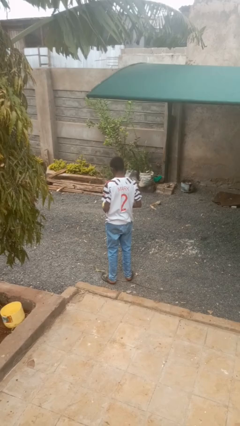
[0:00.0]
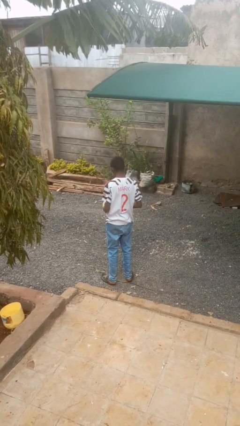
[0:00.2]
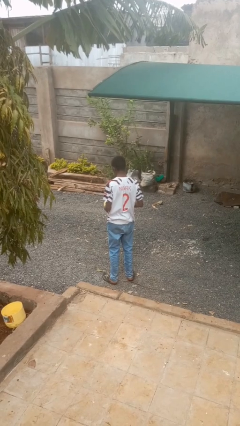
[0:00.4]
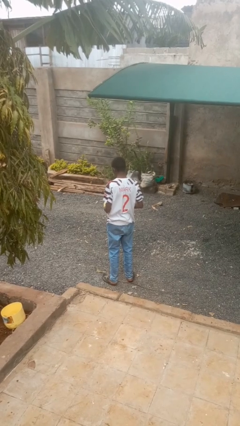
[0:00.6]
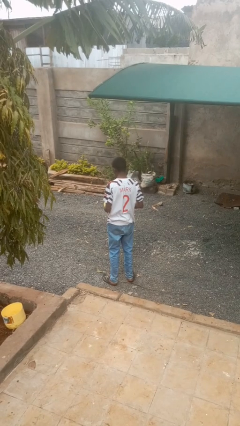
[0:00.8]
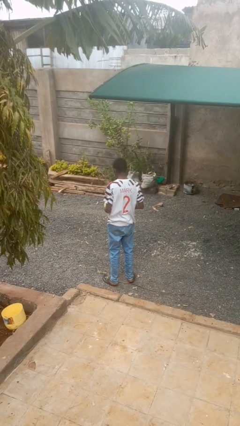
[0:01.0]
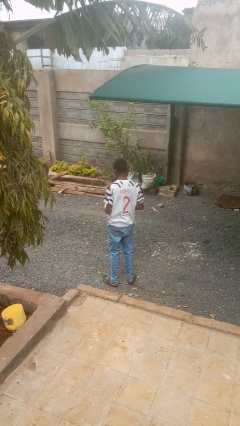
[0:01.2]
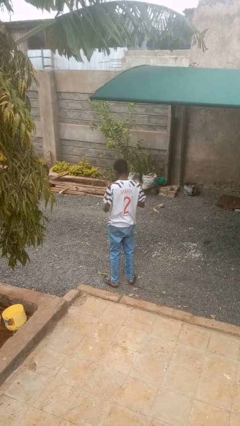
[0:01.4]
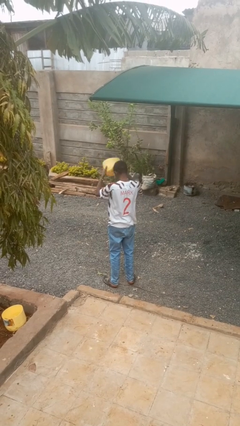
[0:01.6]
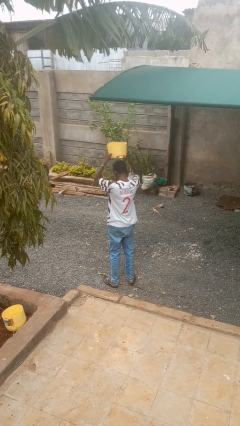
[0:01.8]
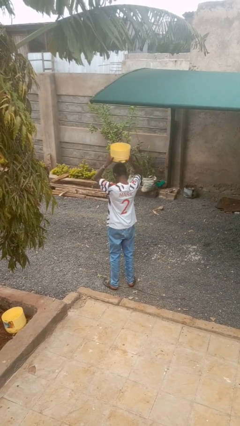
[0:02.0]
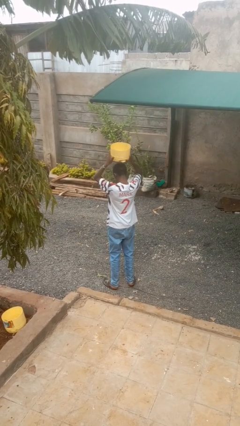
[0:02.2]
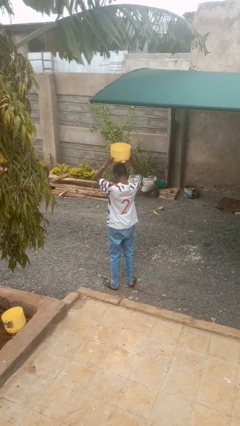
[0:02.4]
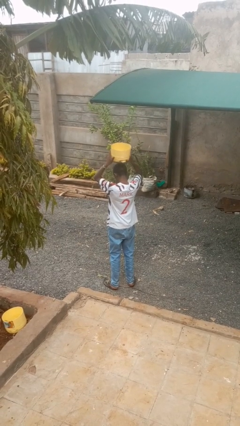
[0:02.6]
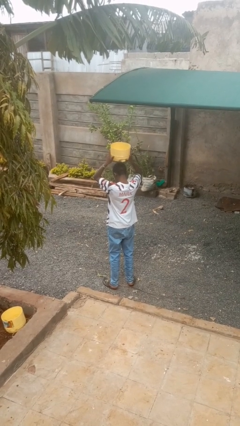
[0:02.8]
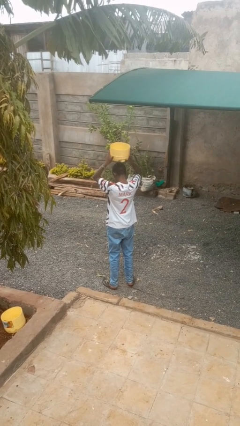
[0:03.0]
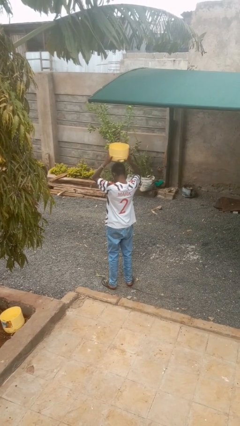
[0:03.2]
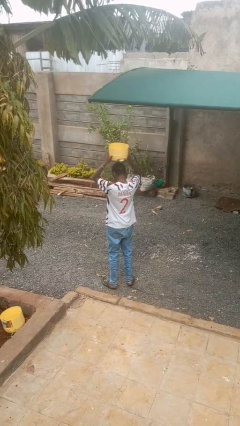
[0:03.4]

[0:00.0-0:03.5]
person holds object above head

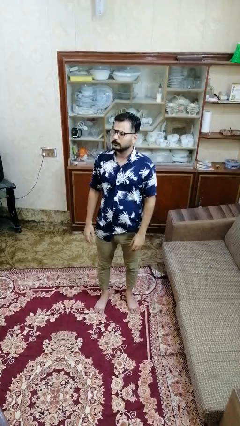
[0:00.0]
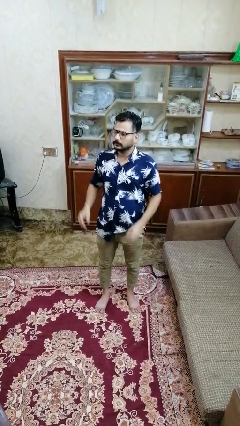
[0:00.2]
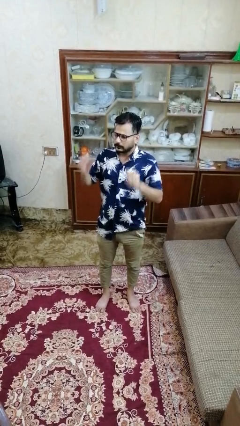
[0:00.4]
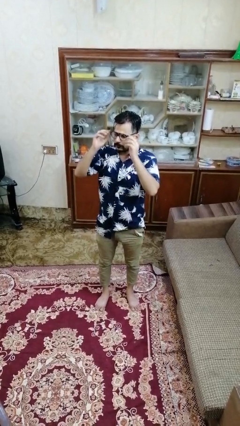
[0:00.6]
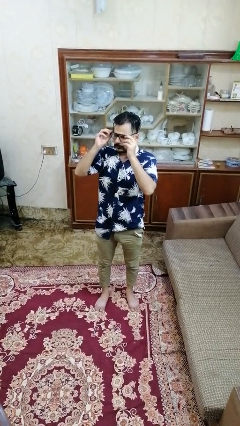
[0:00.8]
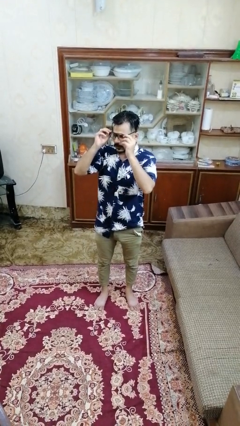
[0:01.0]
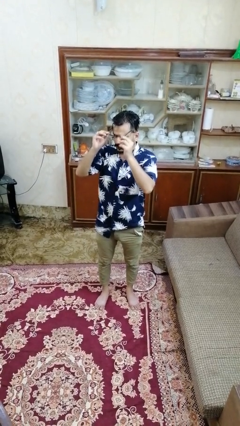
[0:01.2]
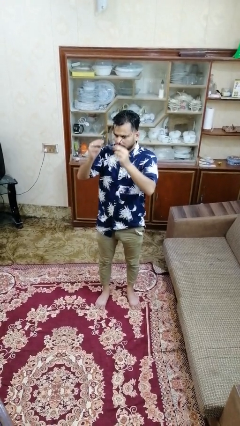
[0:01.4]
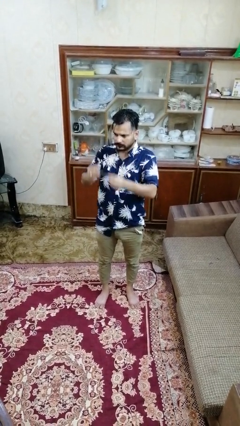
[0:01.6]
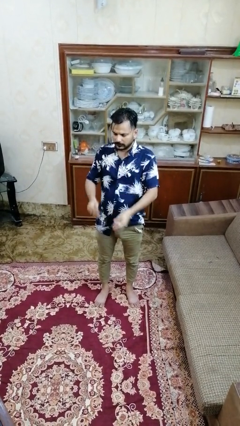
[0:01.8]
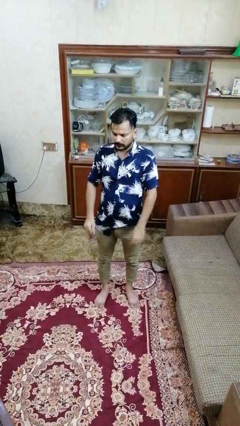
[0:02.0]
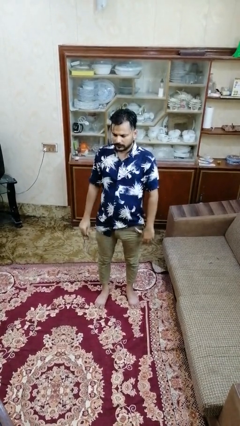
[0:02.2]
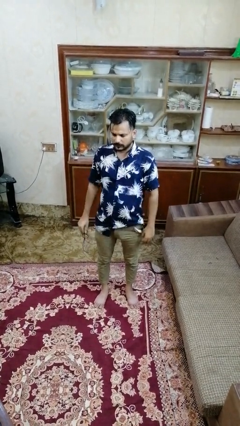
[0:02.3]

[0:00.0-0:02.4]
person takes off glasses

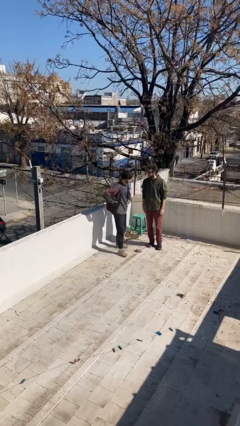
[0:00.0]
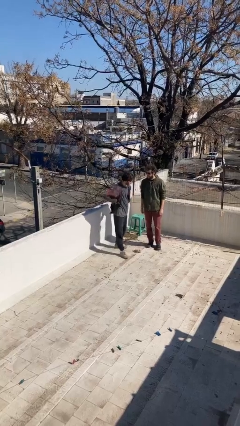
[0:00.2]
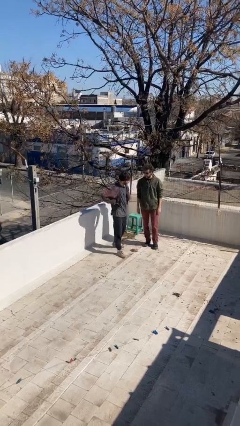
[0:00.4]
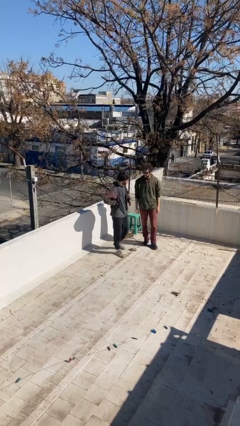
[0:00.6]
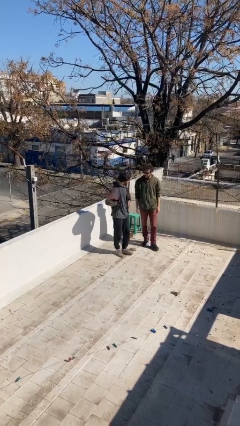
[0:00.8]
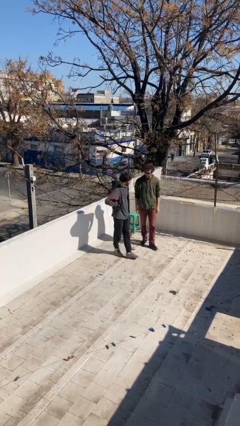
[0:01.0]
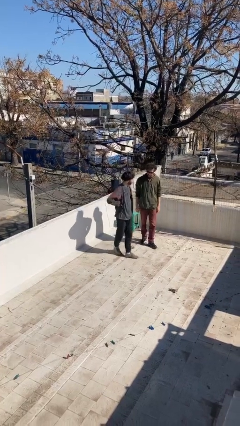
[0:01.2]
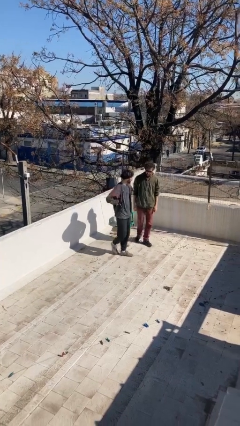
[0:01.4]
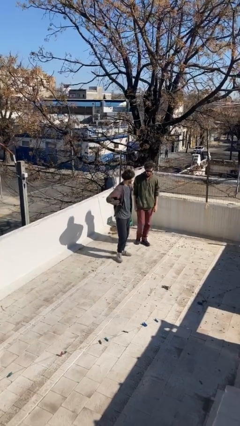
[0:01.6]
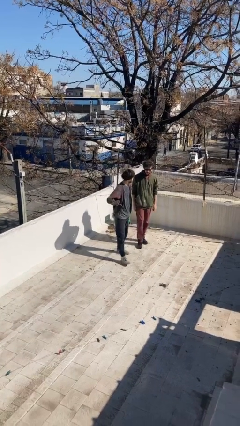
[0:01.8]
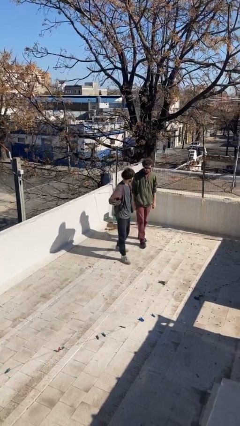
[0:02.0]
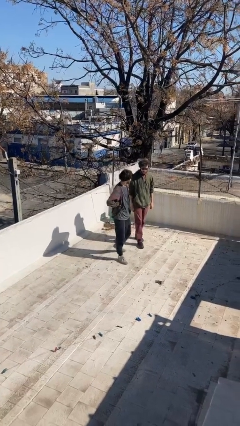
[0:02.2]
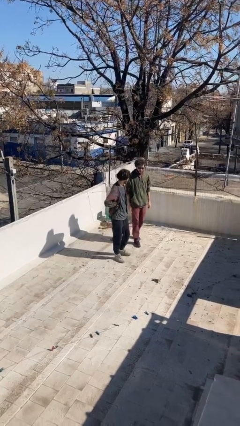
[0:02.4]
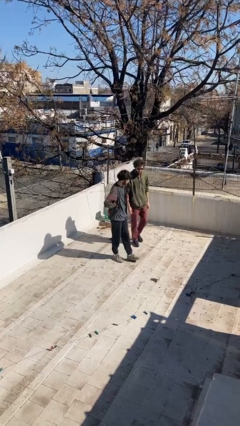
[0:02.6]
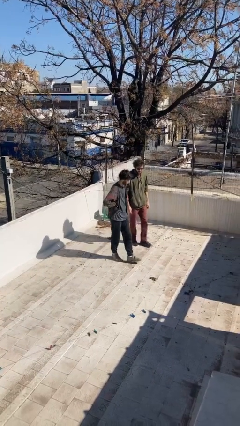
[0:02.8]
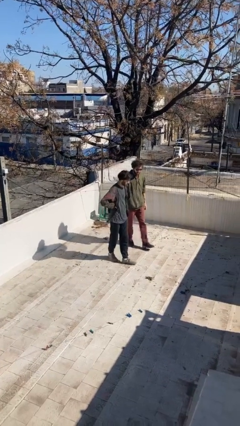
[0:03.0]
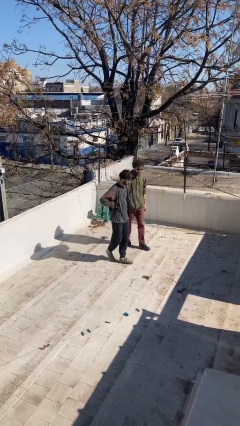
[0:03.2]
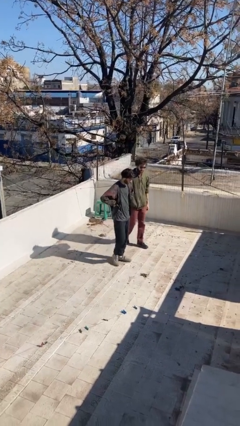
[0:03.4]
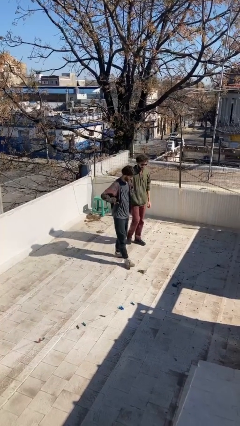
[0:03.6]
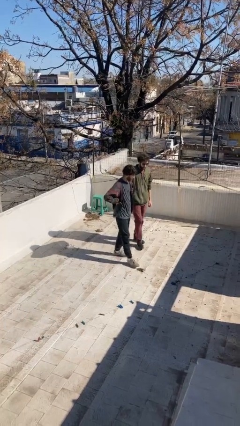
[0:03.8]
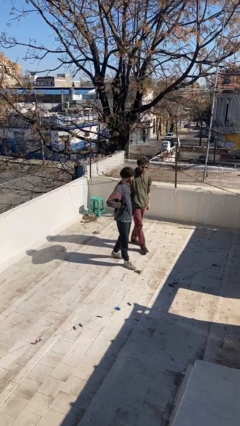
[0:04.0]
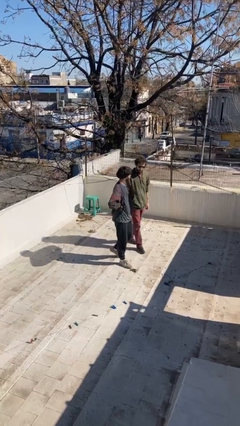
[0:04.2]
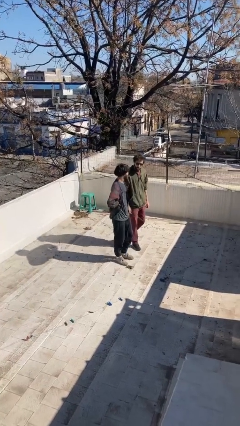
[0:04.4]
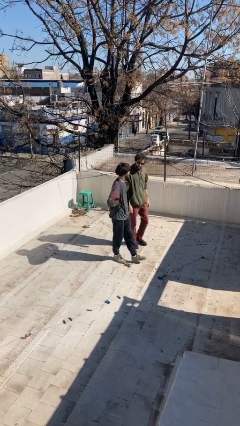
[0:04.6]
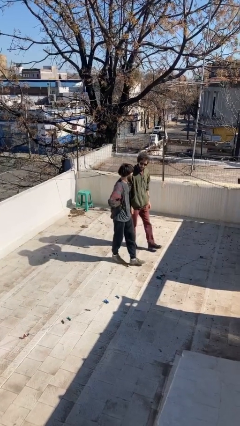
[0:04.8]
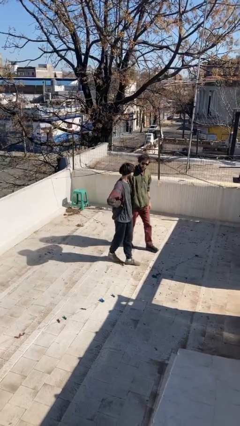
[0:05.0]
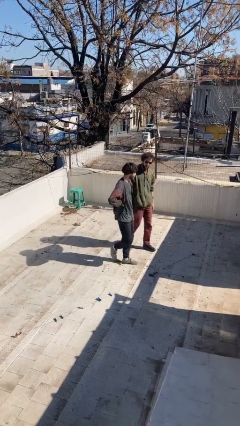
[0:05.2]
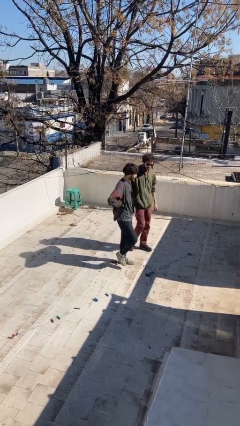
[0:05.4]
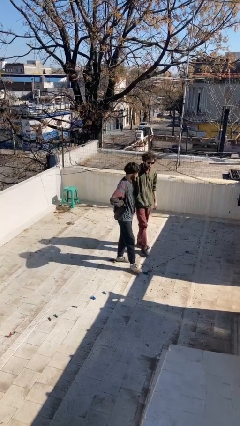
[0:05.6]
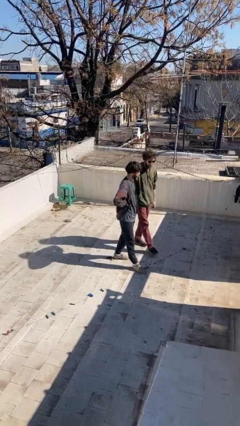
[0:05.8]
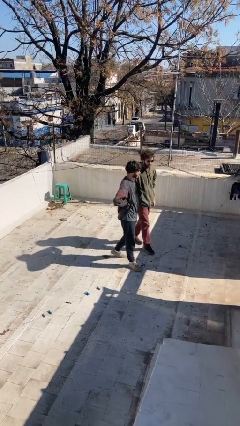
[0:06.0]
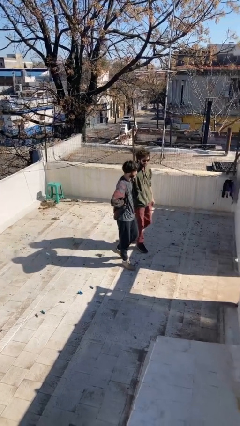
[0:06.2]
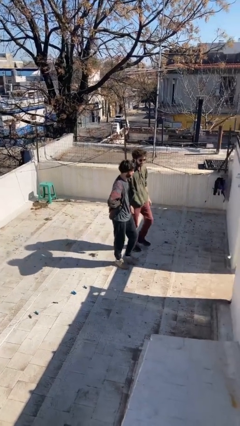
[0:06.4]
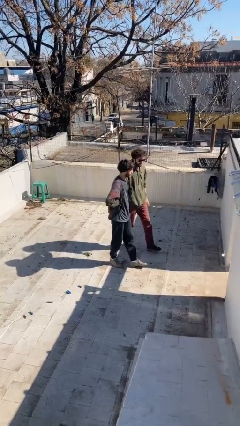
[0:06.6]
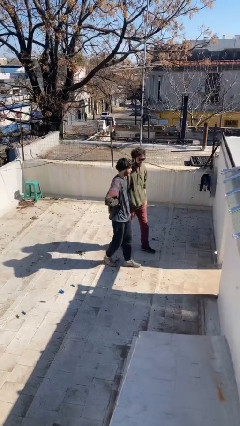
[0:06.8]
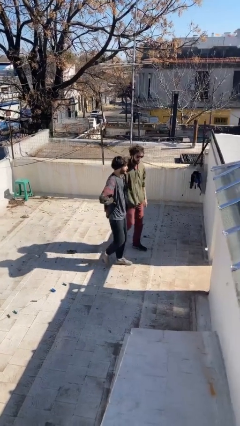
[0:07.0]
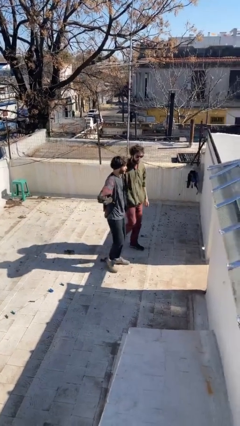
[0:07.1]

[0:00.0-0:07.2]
person talks to person

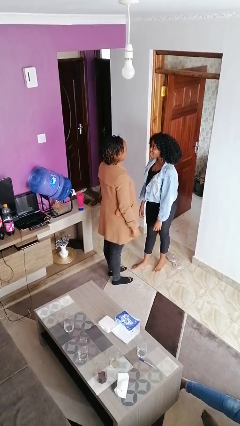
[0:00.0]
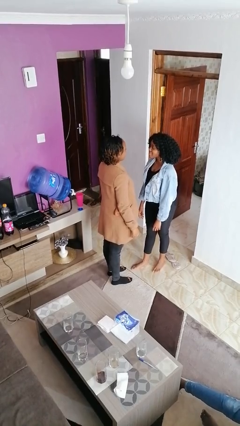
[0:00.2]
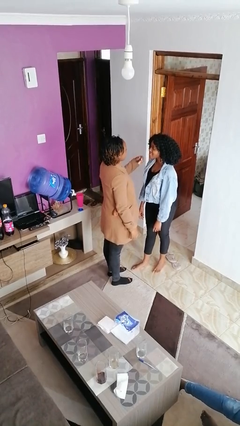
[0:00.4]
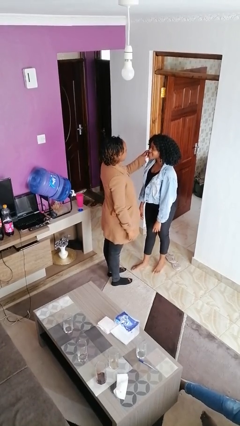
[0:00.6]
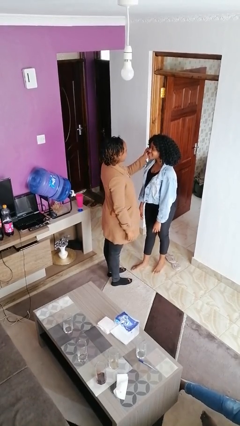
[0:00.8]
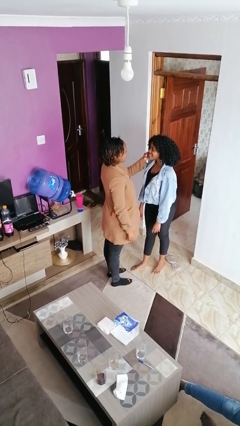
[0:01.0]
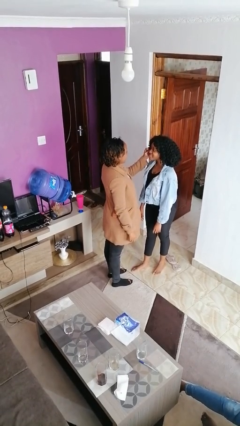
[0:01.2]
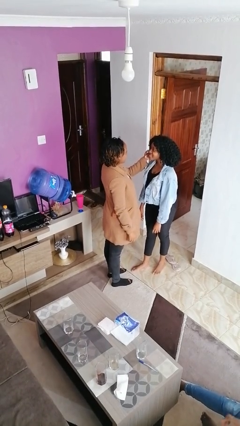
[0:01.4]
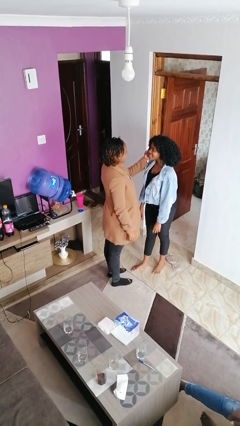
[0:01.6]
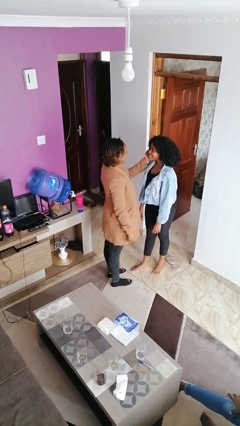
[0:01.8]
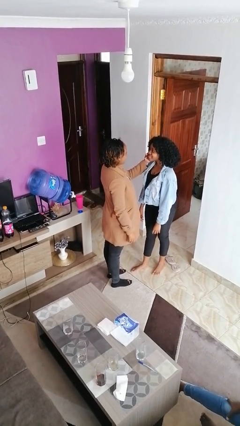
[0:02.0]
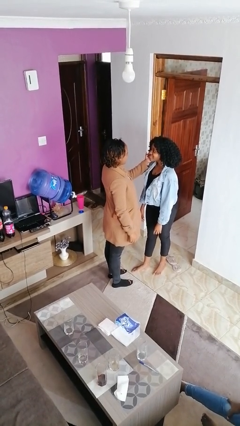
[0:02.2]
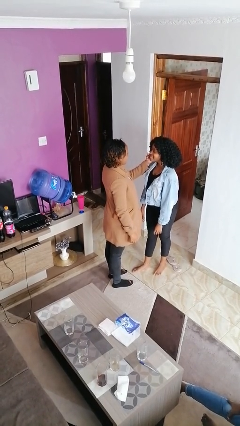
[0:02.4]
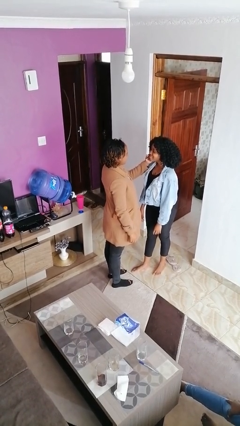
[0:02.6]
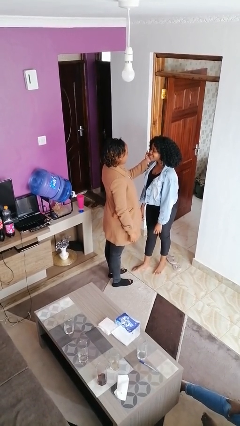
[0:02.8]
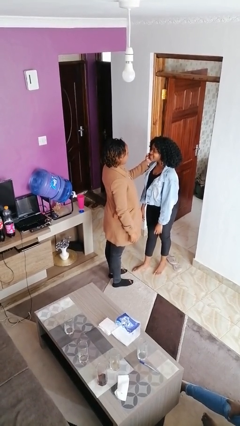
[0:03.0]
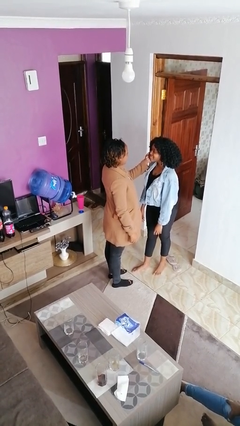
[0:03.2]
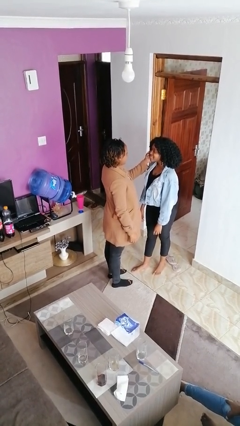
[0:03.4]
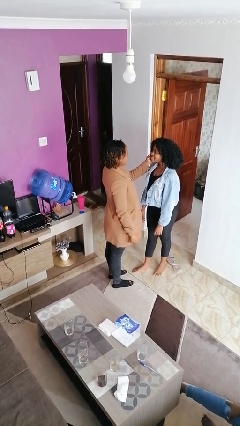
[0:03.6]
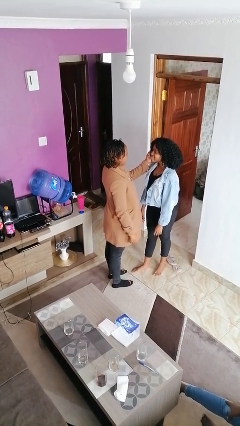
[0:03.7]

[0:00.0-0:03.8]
person touches face of person

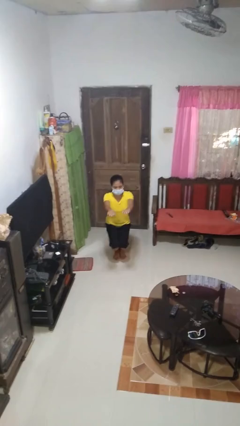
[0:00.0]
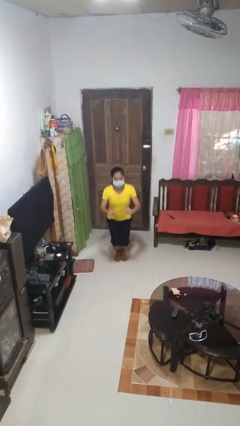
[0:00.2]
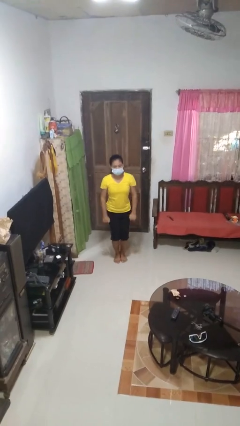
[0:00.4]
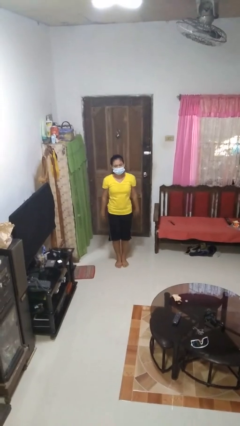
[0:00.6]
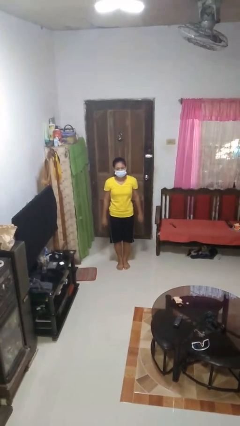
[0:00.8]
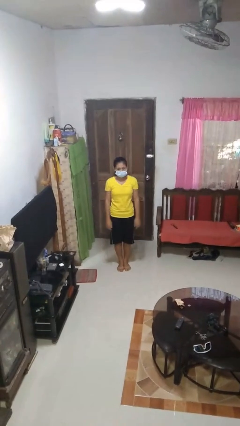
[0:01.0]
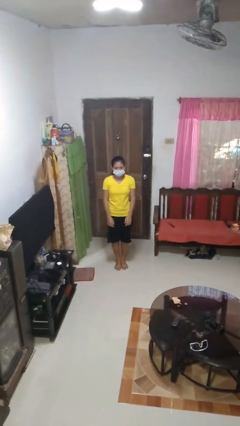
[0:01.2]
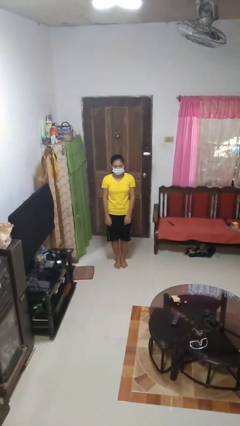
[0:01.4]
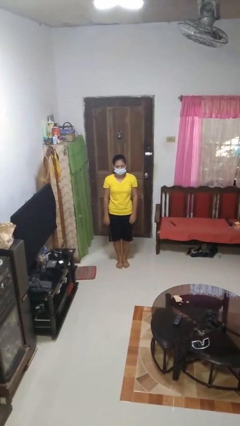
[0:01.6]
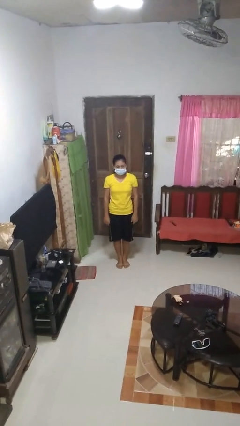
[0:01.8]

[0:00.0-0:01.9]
person stands up
